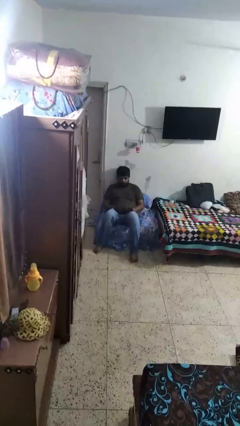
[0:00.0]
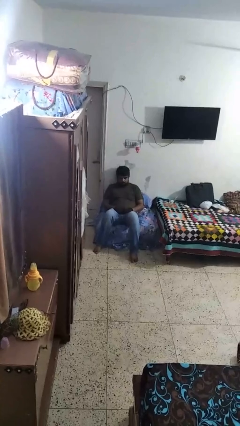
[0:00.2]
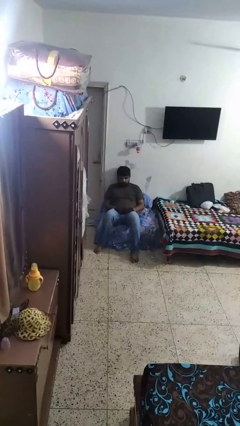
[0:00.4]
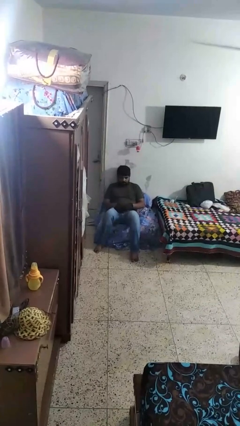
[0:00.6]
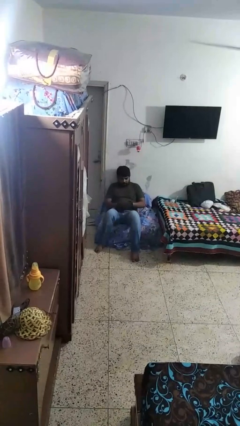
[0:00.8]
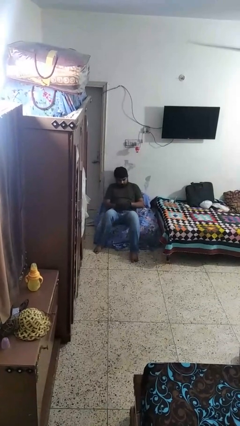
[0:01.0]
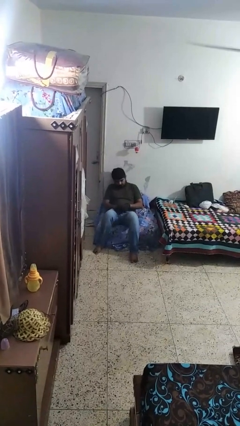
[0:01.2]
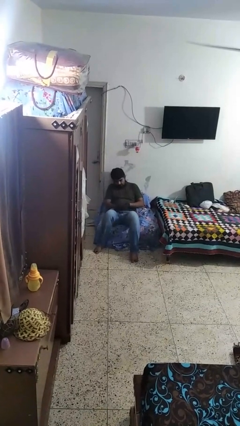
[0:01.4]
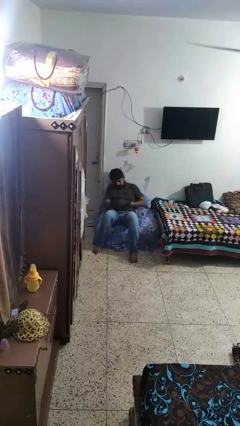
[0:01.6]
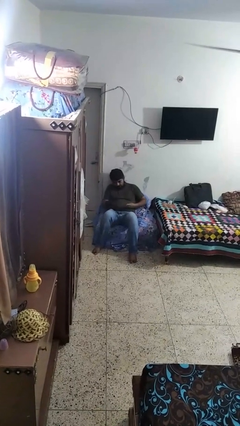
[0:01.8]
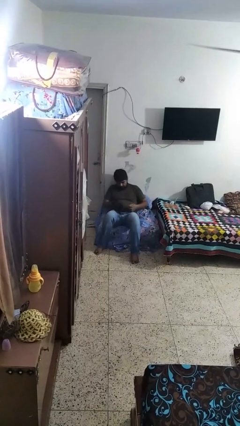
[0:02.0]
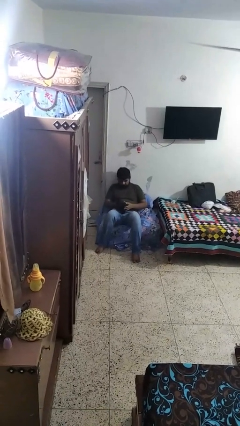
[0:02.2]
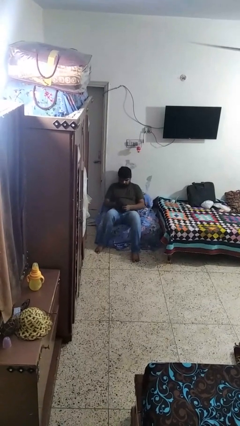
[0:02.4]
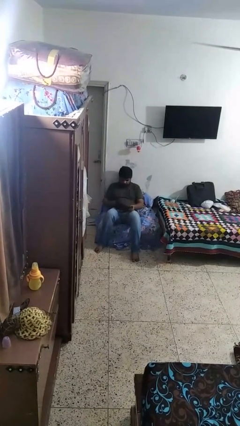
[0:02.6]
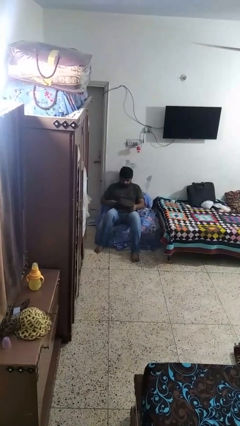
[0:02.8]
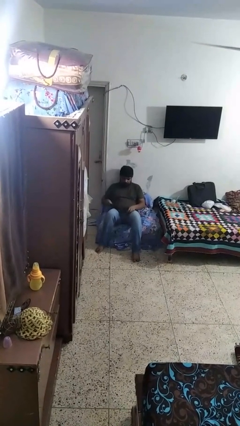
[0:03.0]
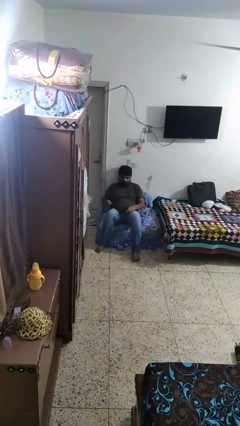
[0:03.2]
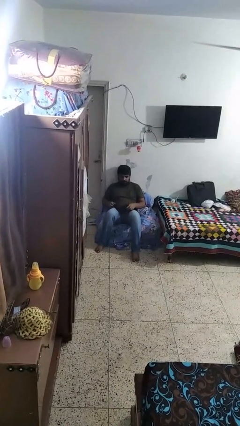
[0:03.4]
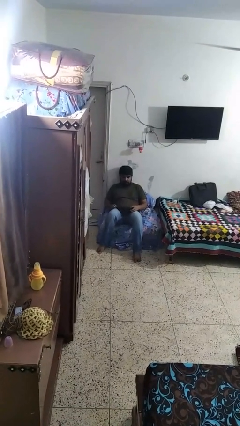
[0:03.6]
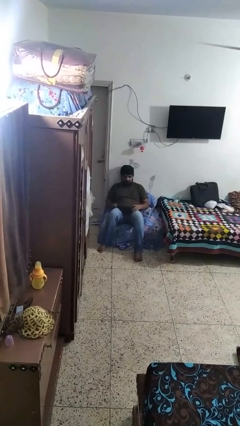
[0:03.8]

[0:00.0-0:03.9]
person takes off gloves

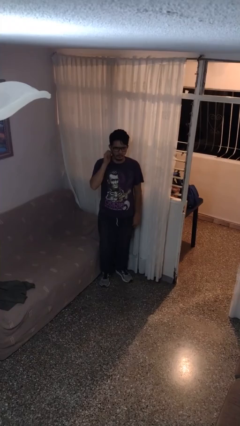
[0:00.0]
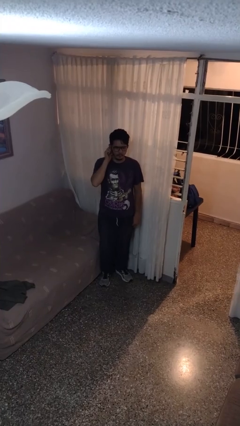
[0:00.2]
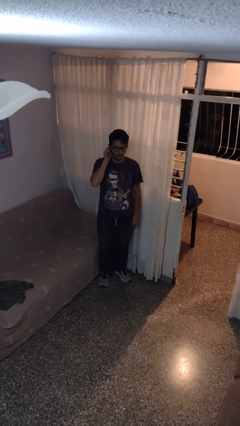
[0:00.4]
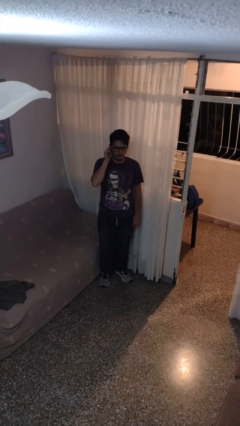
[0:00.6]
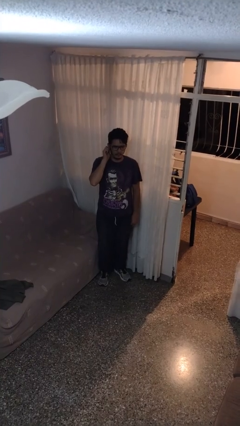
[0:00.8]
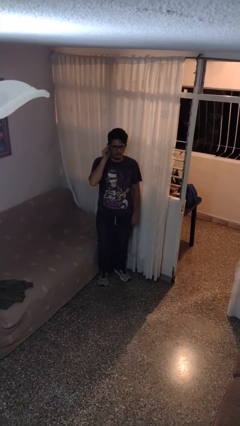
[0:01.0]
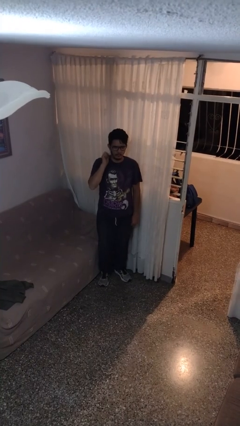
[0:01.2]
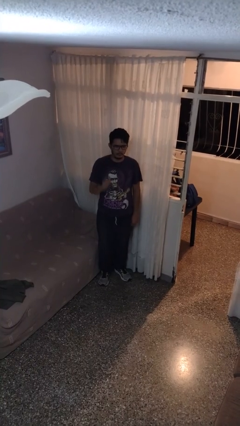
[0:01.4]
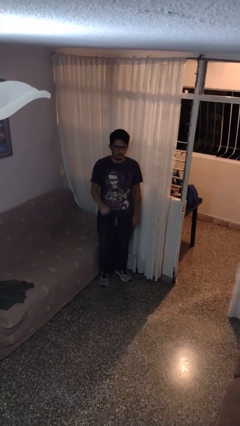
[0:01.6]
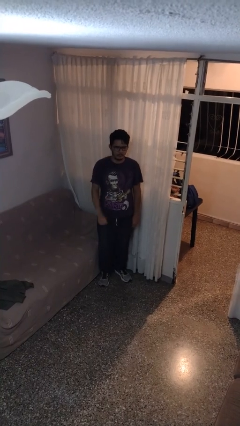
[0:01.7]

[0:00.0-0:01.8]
person touches earlobe

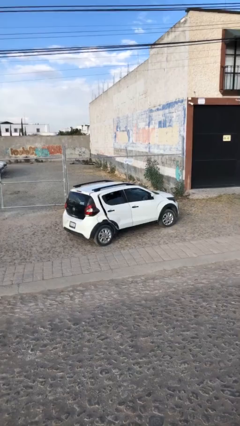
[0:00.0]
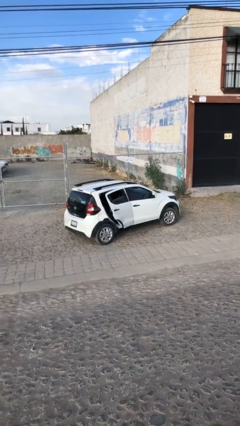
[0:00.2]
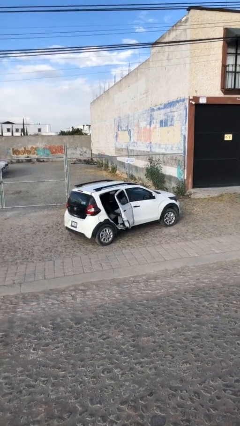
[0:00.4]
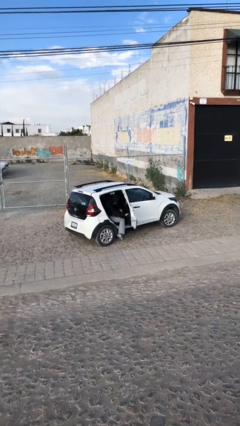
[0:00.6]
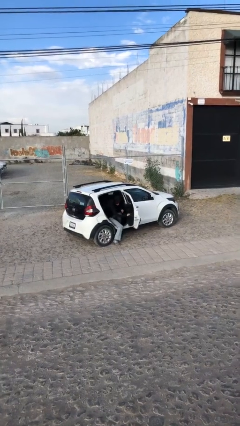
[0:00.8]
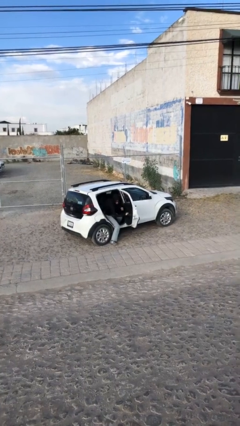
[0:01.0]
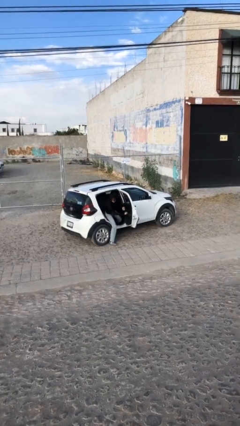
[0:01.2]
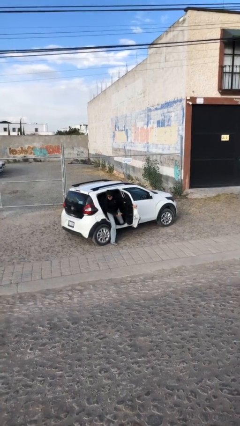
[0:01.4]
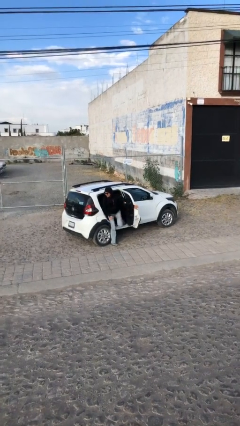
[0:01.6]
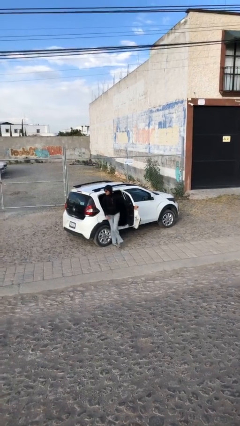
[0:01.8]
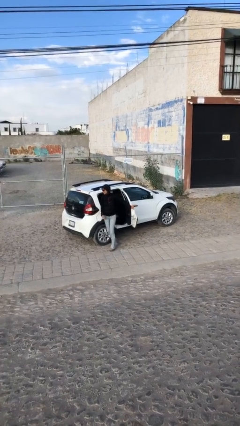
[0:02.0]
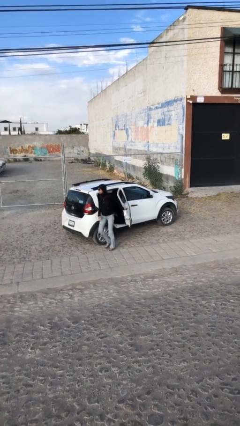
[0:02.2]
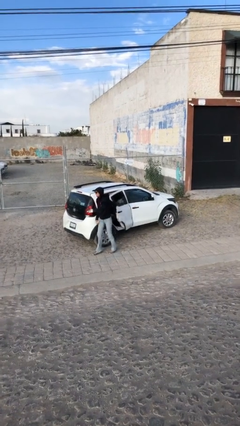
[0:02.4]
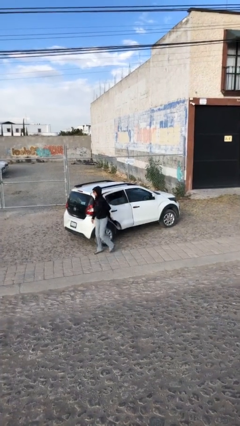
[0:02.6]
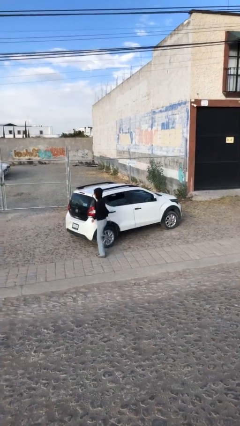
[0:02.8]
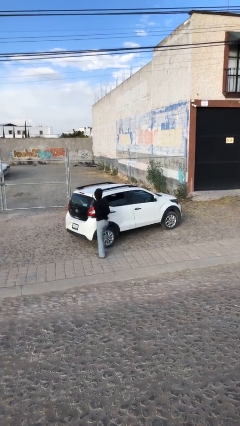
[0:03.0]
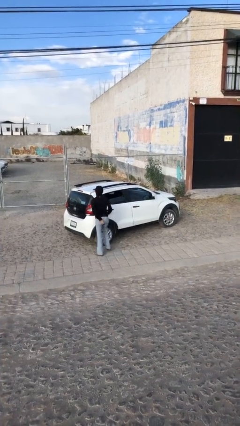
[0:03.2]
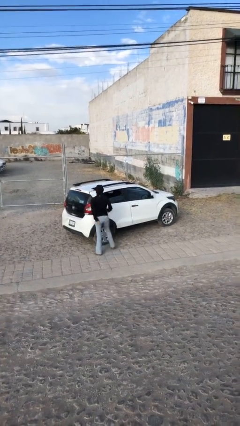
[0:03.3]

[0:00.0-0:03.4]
car drops off person

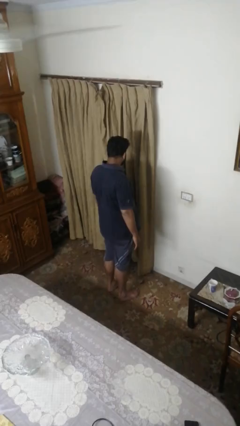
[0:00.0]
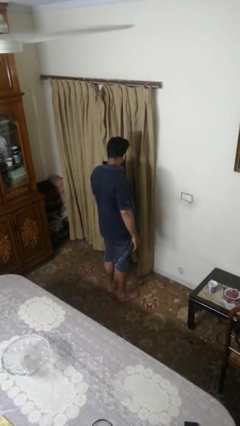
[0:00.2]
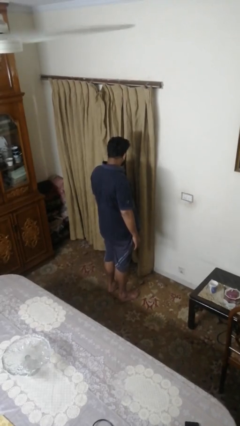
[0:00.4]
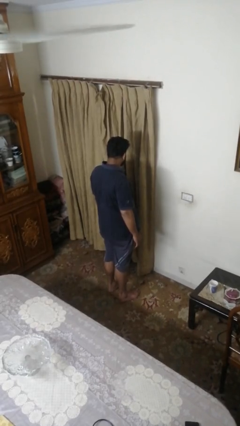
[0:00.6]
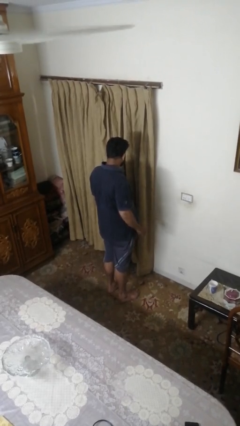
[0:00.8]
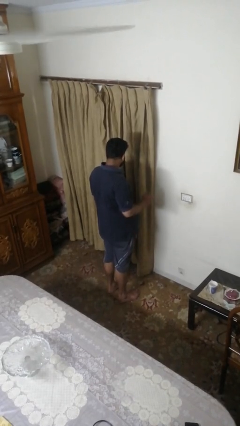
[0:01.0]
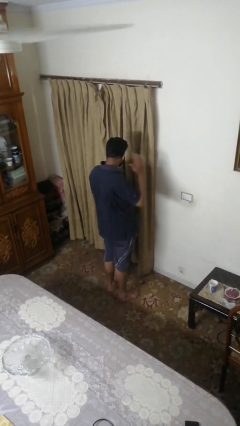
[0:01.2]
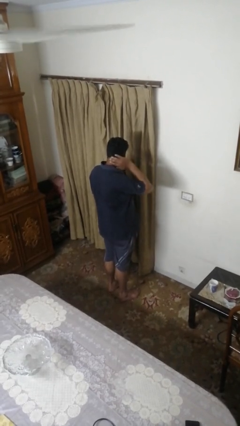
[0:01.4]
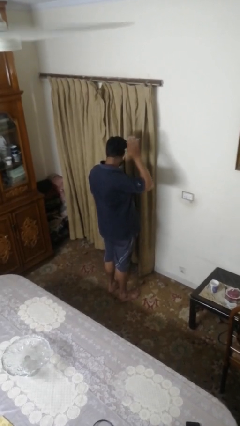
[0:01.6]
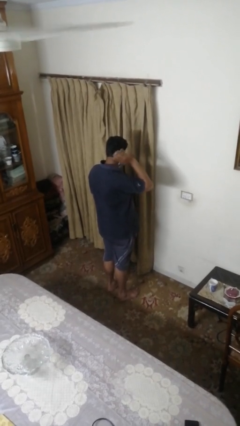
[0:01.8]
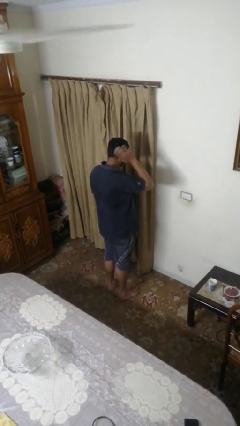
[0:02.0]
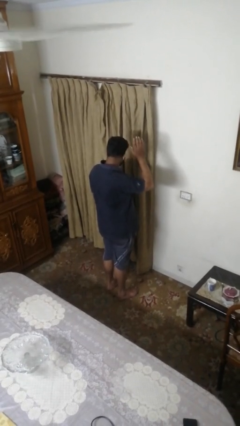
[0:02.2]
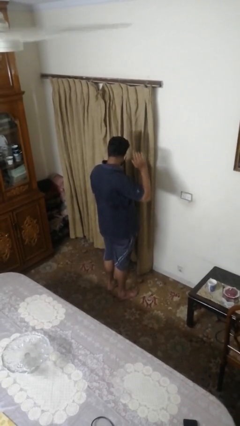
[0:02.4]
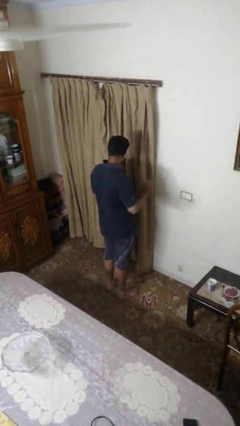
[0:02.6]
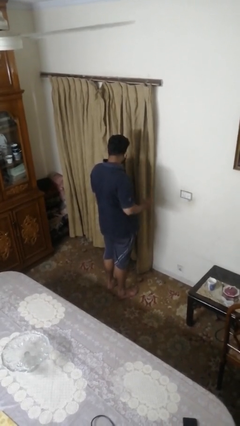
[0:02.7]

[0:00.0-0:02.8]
person strokes hair

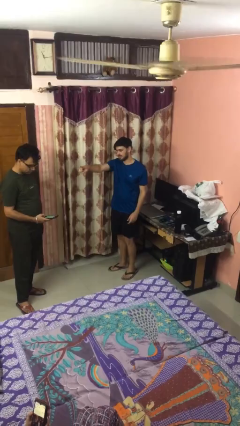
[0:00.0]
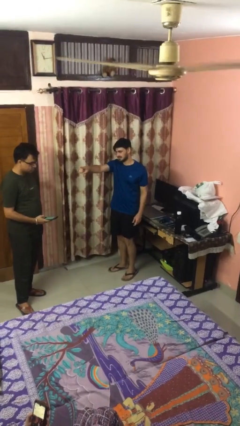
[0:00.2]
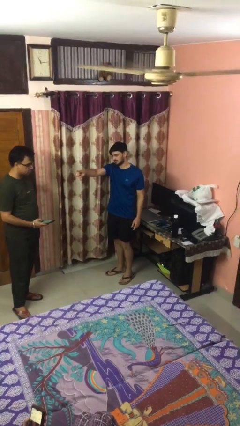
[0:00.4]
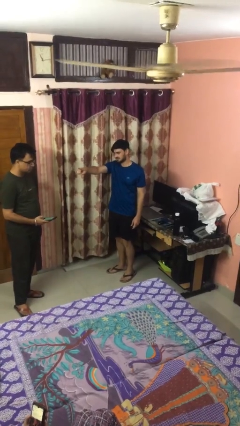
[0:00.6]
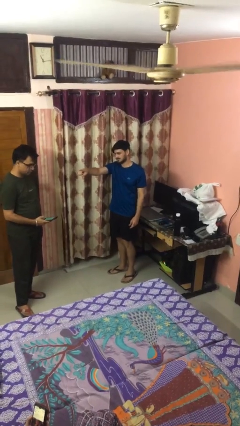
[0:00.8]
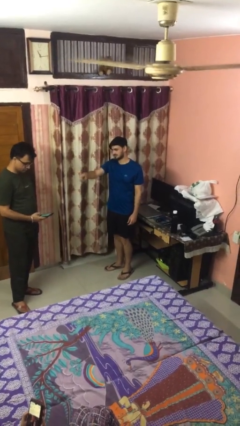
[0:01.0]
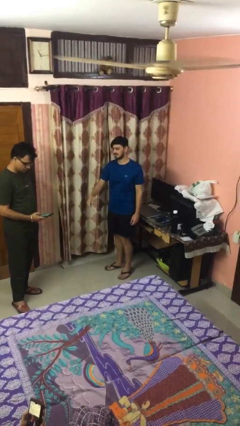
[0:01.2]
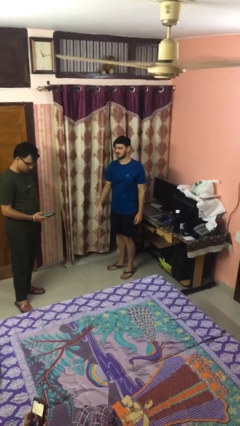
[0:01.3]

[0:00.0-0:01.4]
person points at person

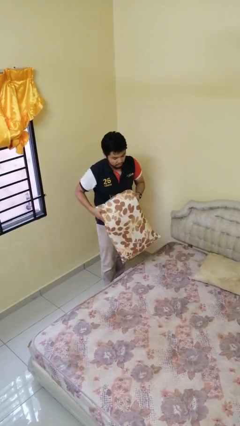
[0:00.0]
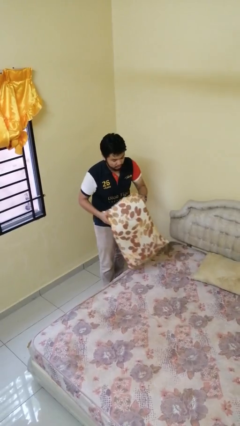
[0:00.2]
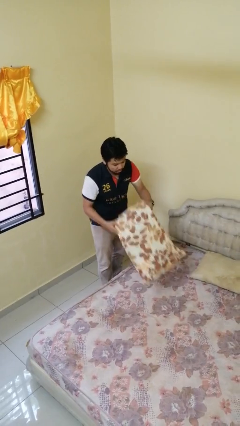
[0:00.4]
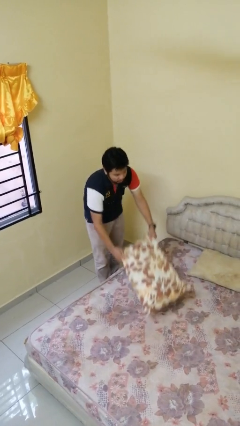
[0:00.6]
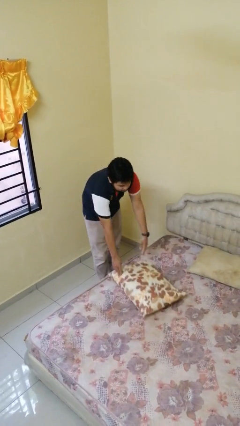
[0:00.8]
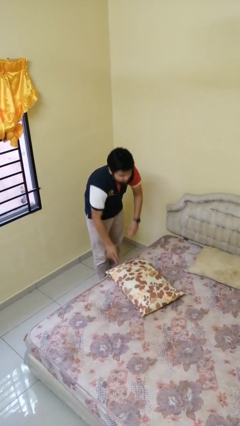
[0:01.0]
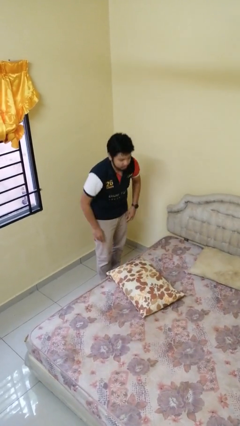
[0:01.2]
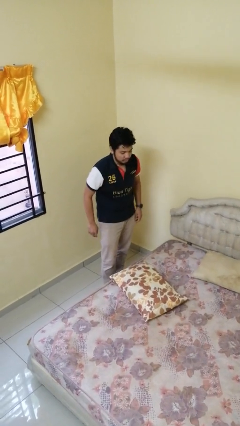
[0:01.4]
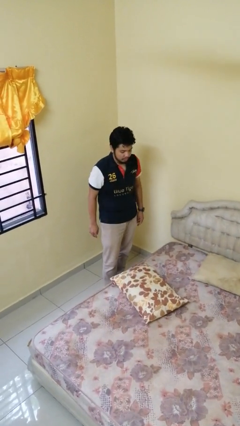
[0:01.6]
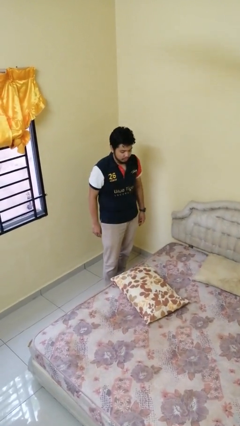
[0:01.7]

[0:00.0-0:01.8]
person puts down object on bed

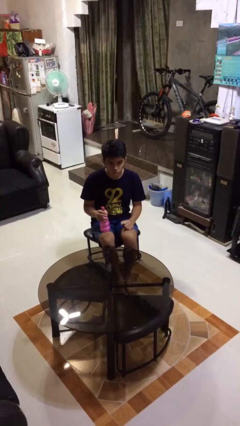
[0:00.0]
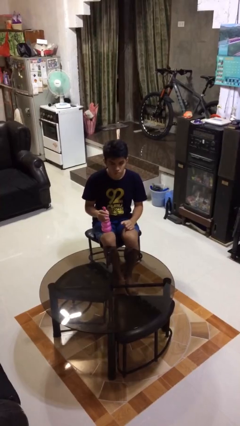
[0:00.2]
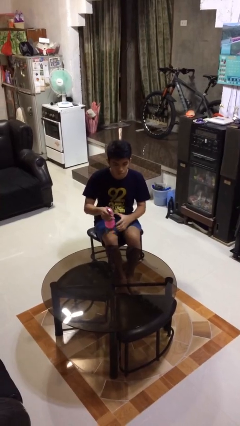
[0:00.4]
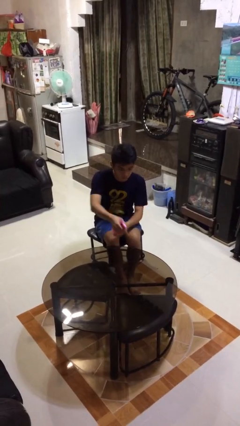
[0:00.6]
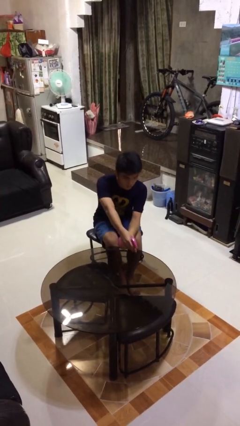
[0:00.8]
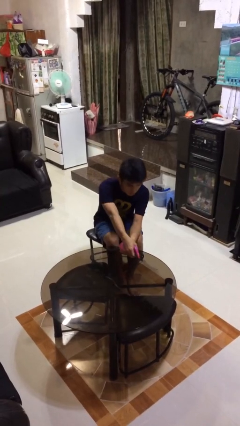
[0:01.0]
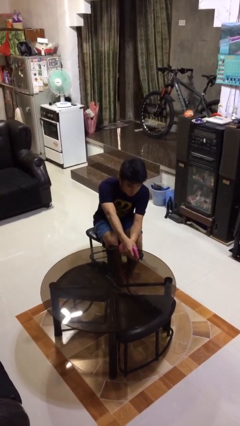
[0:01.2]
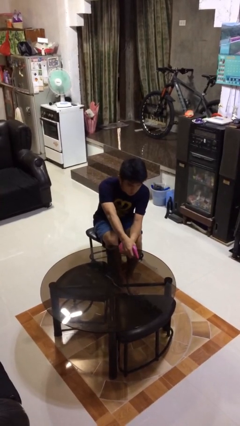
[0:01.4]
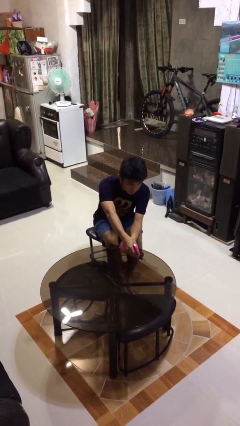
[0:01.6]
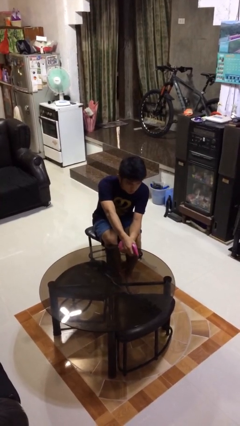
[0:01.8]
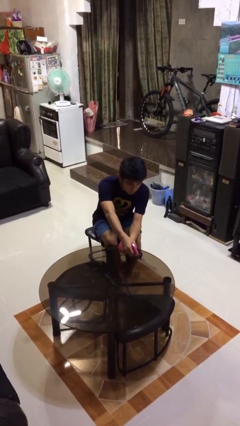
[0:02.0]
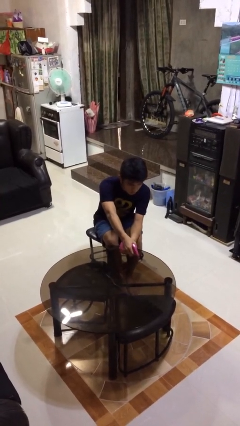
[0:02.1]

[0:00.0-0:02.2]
person sprays from bottle
